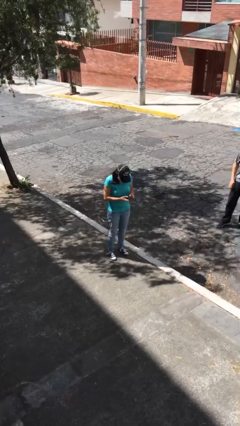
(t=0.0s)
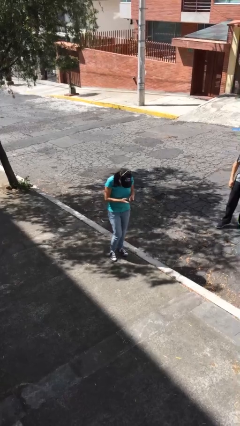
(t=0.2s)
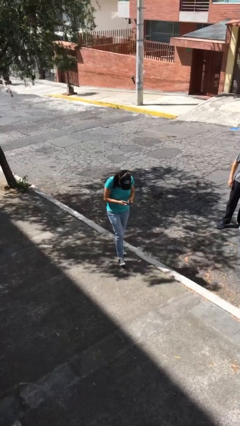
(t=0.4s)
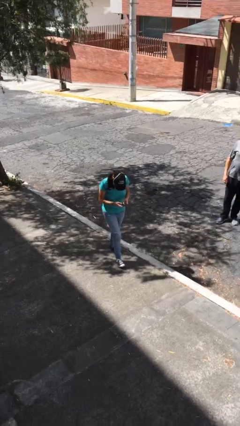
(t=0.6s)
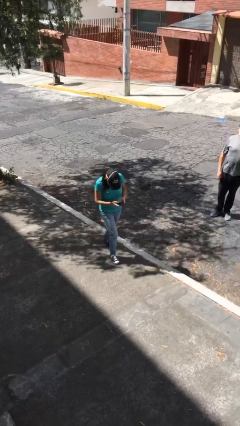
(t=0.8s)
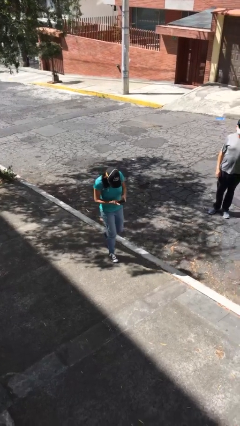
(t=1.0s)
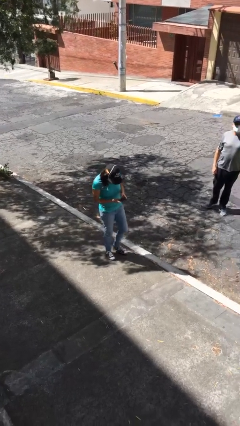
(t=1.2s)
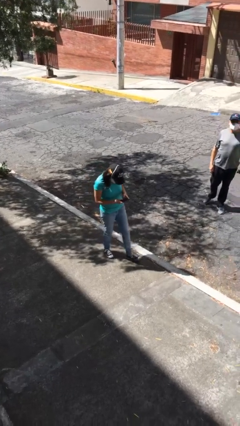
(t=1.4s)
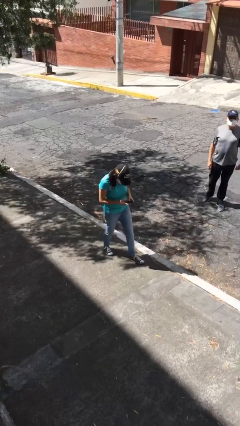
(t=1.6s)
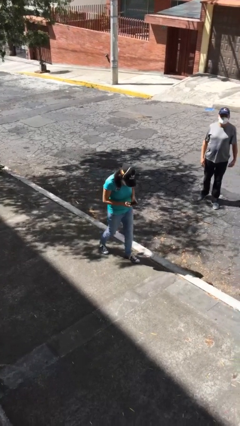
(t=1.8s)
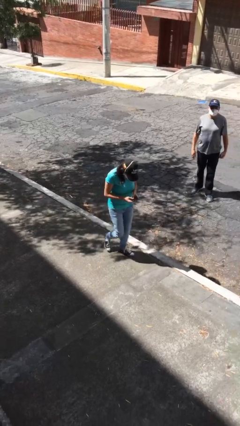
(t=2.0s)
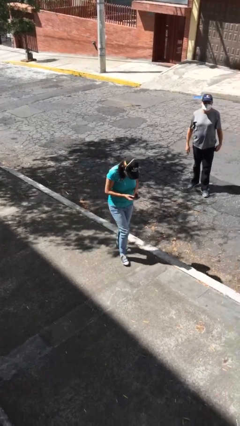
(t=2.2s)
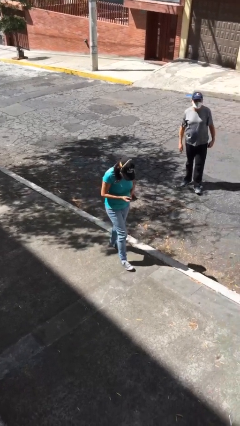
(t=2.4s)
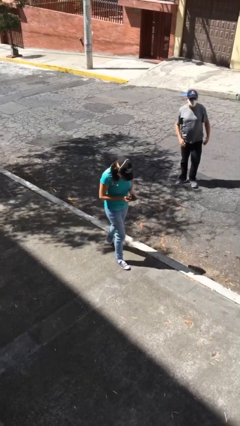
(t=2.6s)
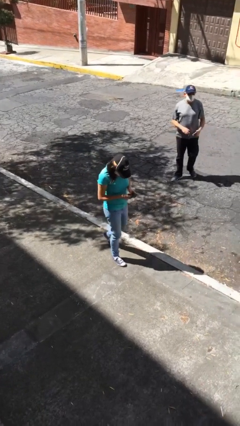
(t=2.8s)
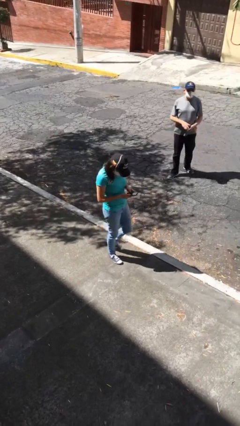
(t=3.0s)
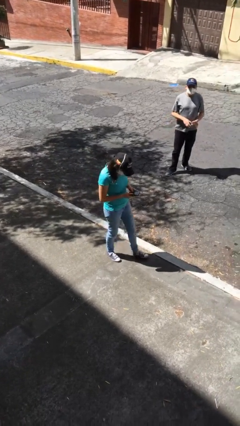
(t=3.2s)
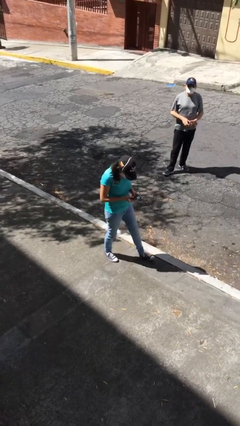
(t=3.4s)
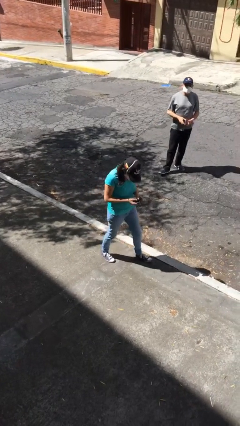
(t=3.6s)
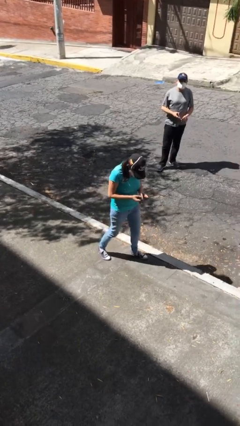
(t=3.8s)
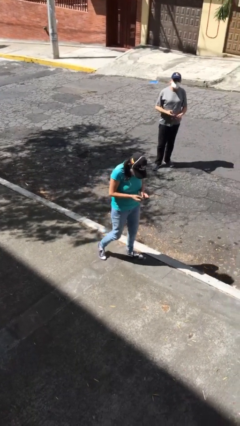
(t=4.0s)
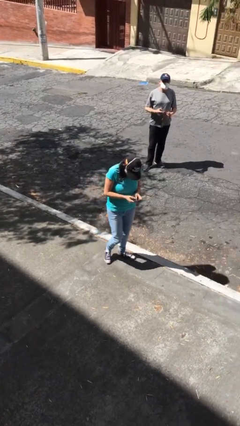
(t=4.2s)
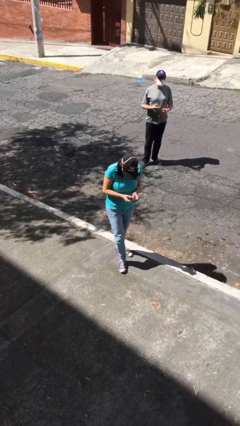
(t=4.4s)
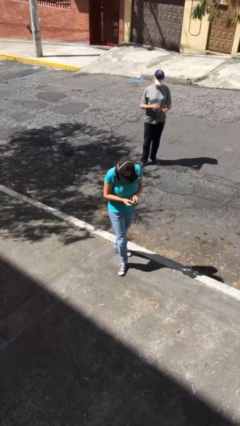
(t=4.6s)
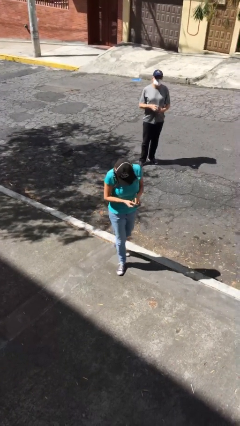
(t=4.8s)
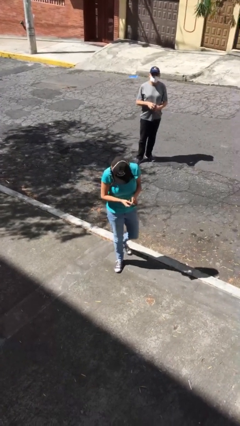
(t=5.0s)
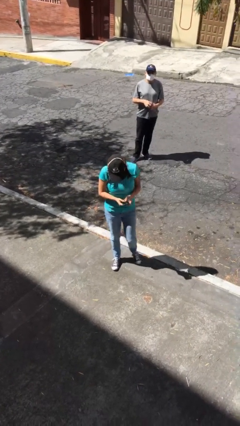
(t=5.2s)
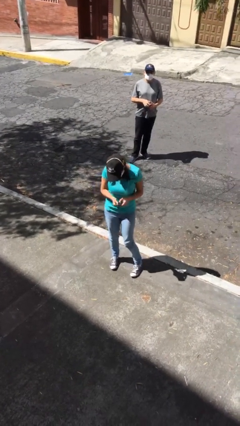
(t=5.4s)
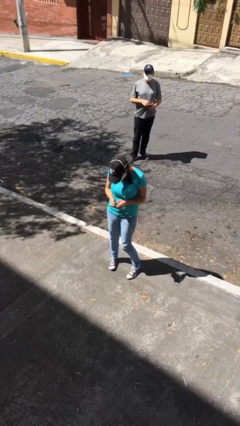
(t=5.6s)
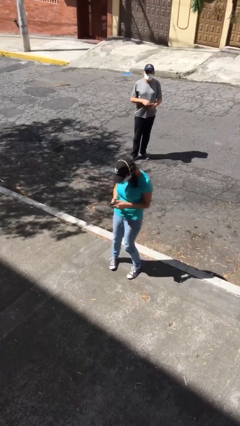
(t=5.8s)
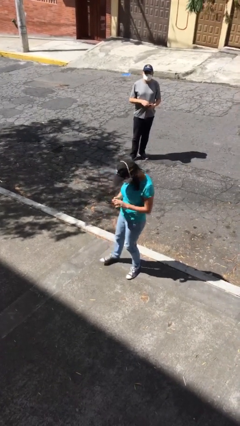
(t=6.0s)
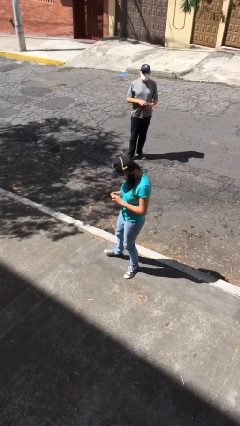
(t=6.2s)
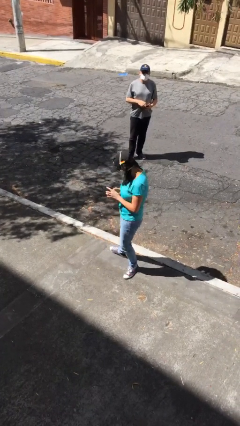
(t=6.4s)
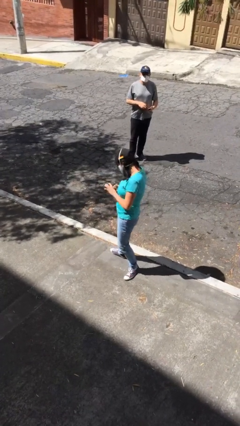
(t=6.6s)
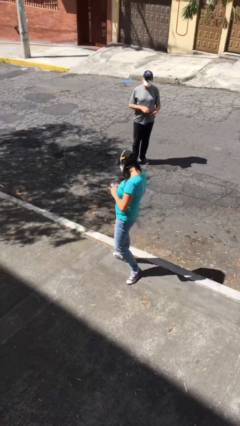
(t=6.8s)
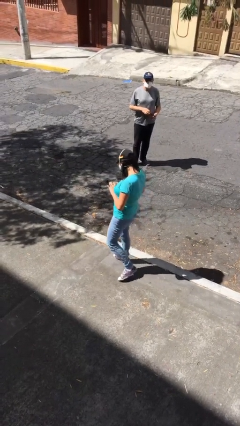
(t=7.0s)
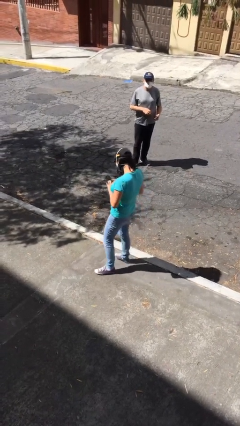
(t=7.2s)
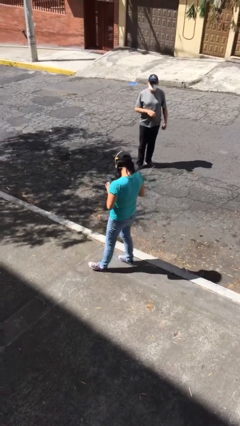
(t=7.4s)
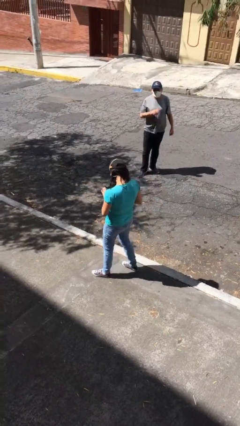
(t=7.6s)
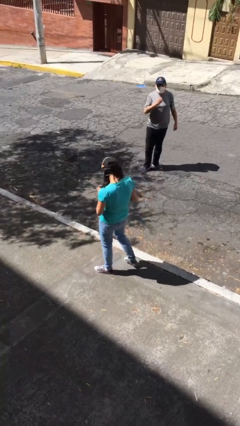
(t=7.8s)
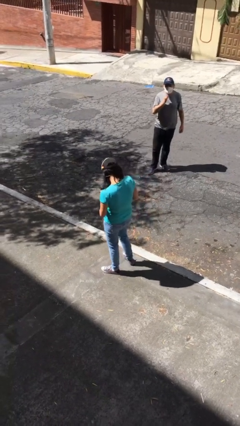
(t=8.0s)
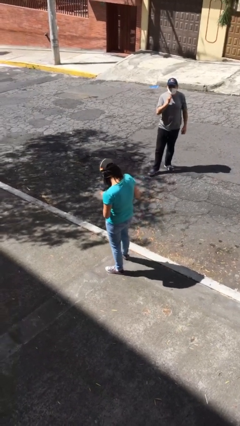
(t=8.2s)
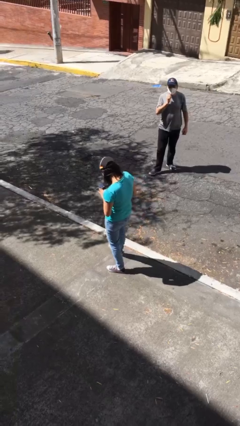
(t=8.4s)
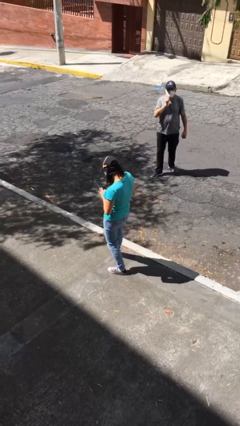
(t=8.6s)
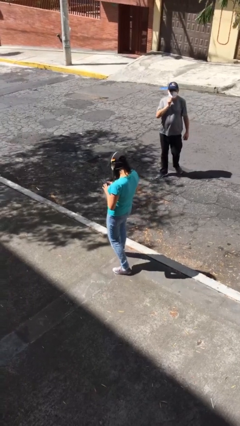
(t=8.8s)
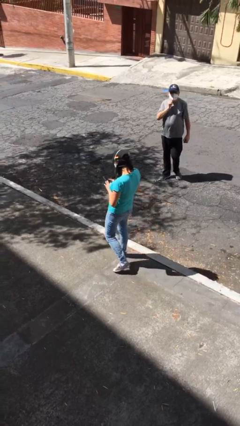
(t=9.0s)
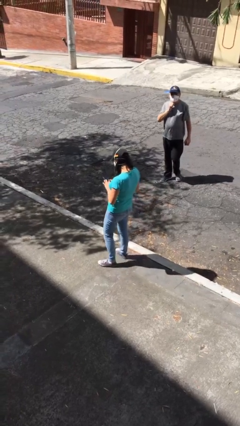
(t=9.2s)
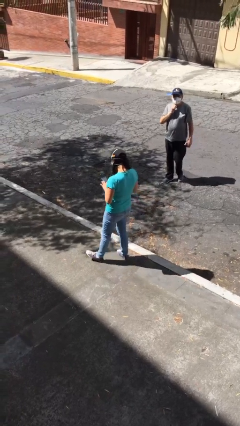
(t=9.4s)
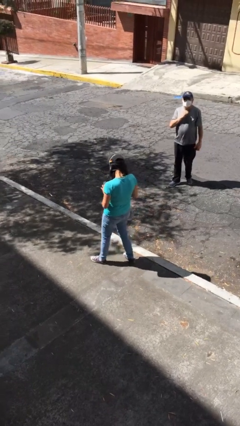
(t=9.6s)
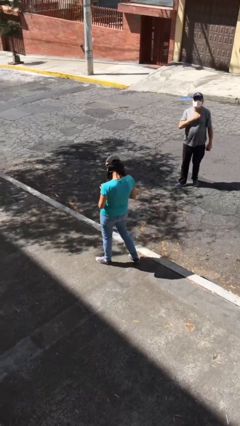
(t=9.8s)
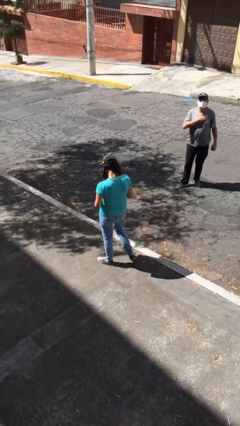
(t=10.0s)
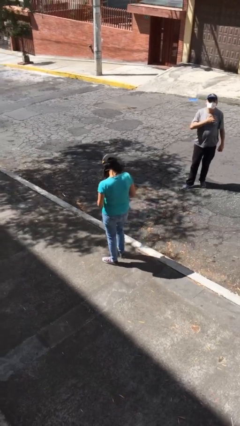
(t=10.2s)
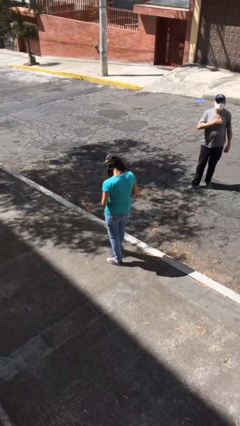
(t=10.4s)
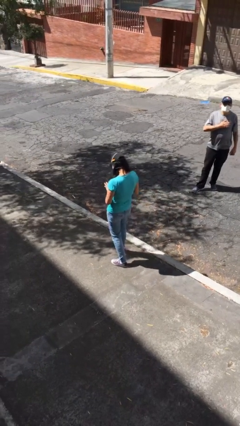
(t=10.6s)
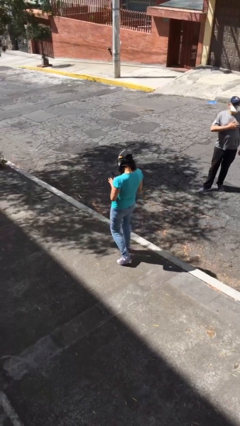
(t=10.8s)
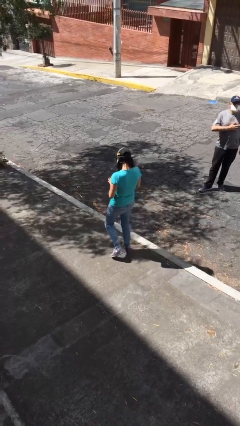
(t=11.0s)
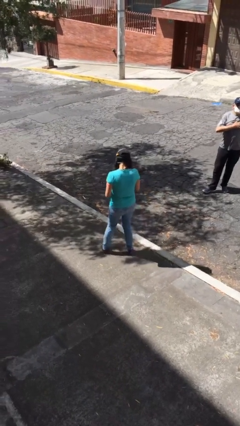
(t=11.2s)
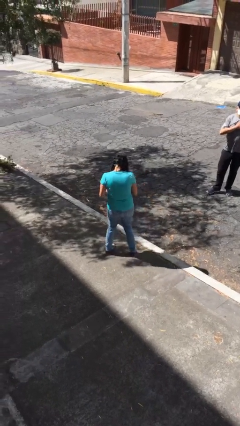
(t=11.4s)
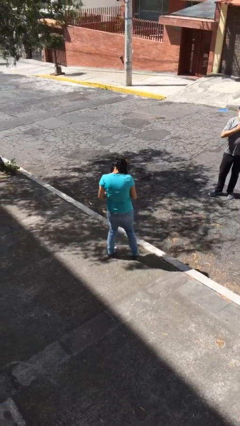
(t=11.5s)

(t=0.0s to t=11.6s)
person texts on phone

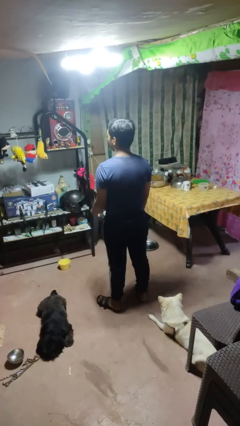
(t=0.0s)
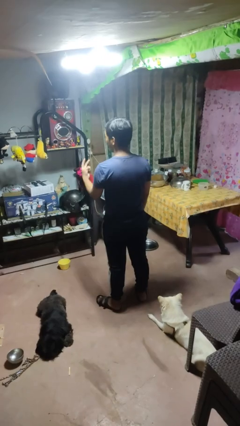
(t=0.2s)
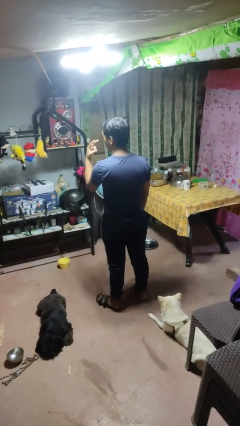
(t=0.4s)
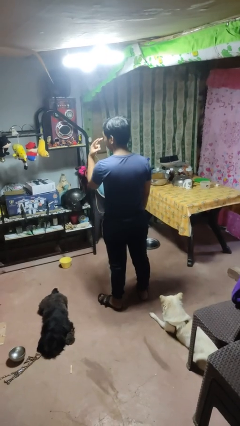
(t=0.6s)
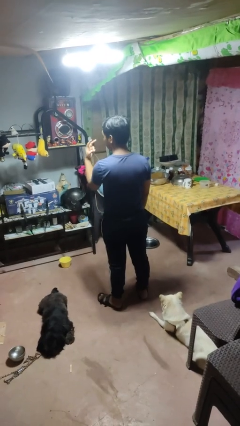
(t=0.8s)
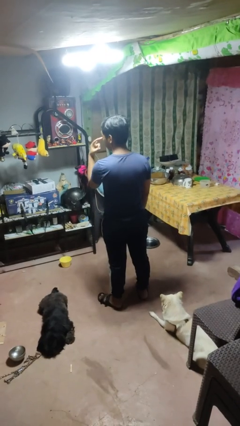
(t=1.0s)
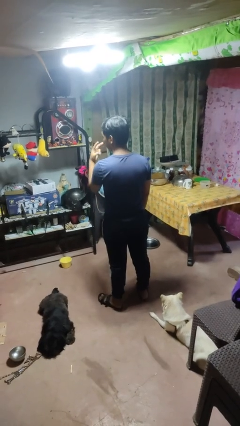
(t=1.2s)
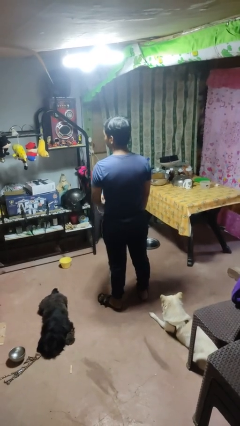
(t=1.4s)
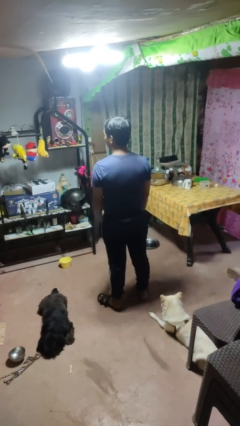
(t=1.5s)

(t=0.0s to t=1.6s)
person gestures watch closely

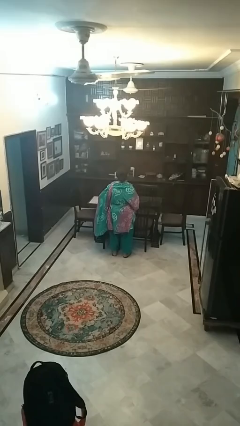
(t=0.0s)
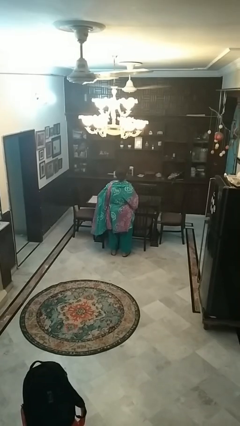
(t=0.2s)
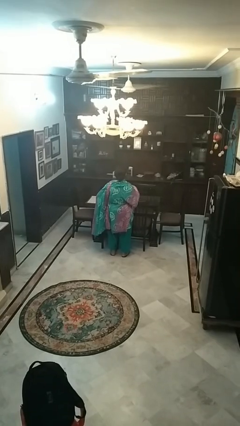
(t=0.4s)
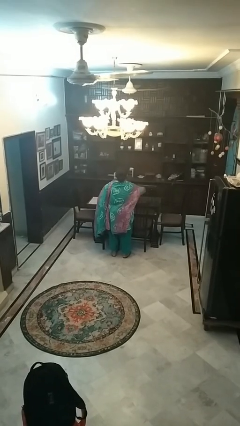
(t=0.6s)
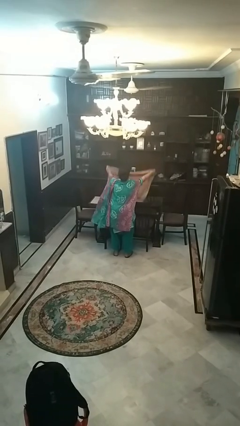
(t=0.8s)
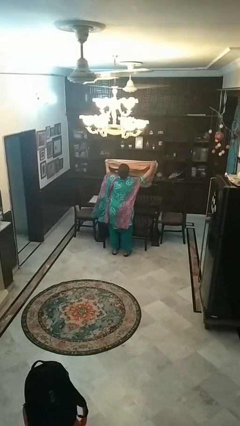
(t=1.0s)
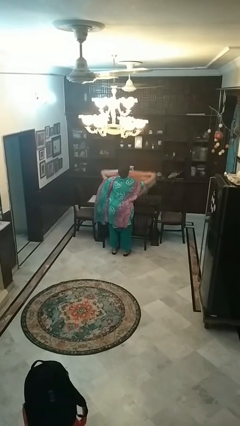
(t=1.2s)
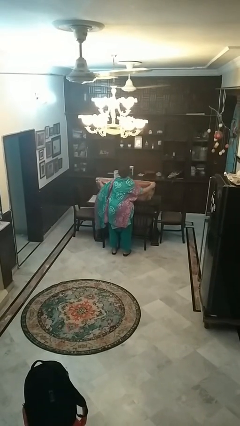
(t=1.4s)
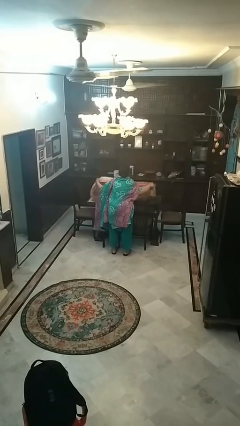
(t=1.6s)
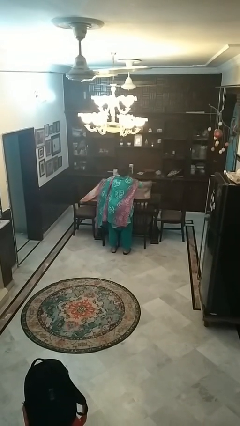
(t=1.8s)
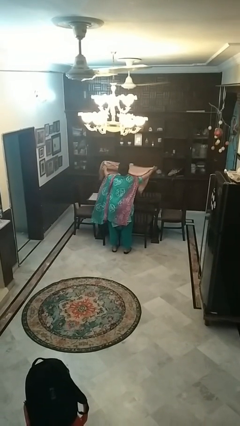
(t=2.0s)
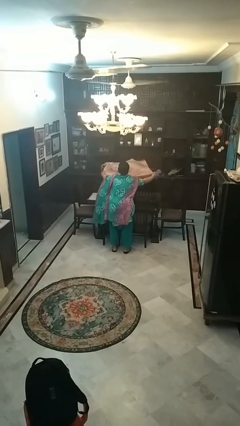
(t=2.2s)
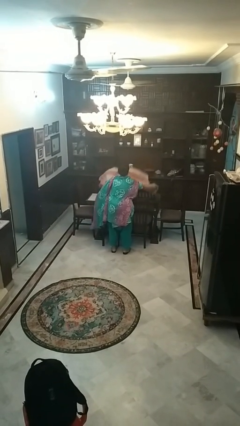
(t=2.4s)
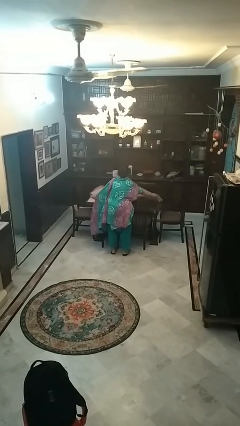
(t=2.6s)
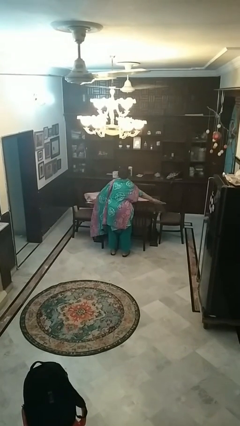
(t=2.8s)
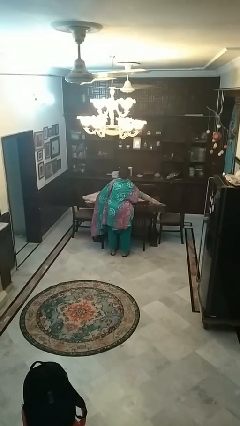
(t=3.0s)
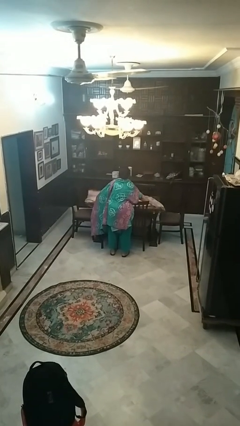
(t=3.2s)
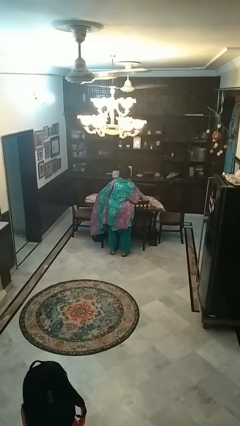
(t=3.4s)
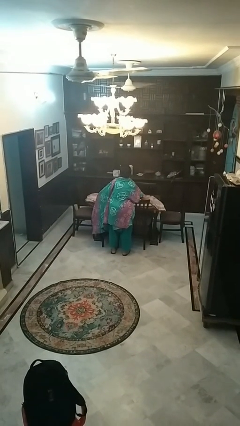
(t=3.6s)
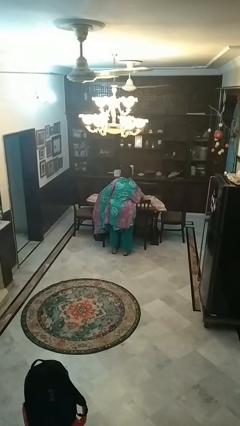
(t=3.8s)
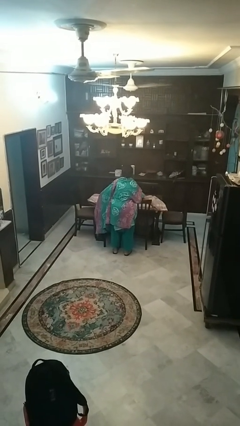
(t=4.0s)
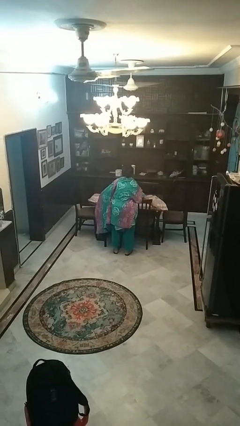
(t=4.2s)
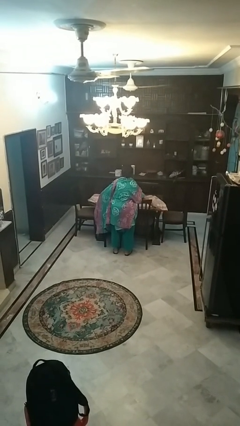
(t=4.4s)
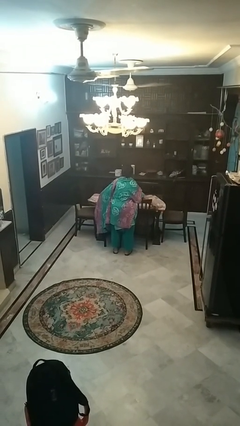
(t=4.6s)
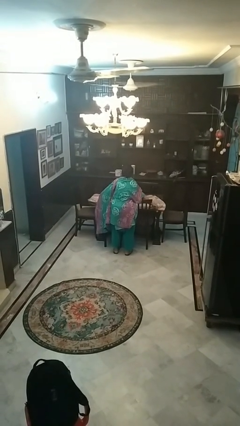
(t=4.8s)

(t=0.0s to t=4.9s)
person spreads tablecloth
